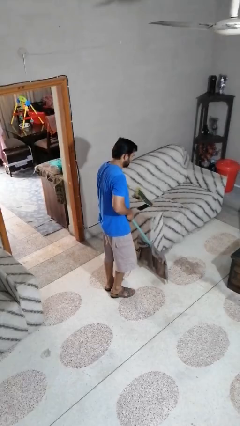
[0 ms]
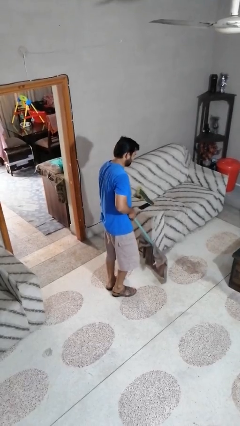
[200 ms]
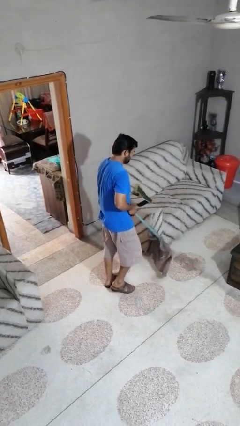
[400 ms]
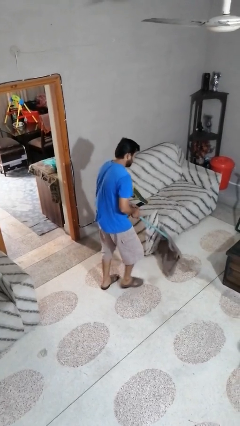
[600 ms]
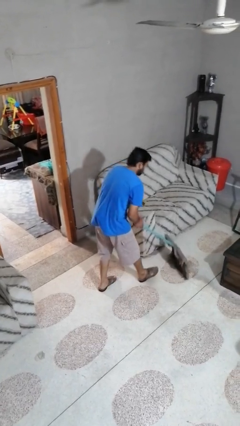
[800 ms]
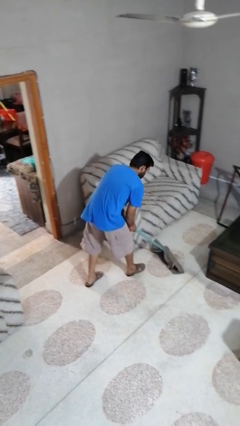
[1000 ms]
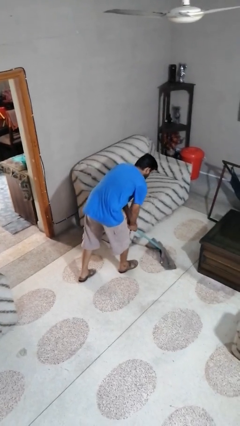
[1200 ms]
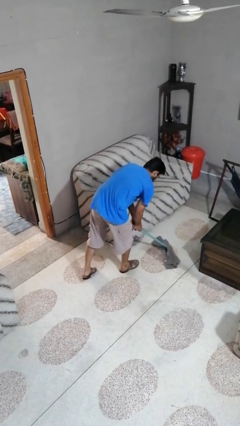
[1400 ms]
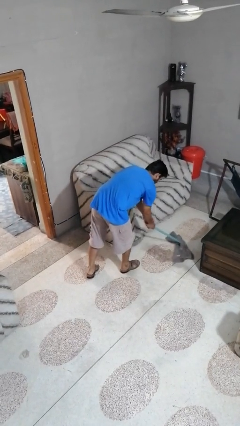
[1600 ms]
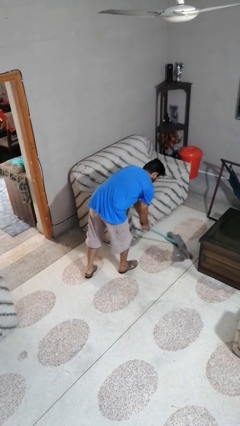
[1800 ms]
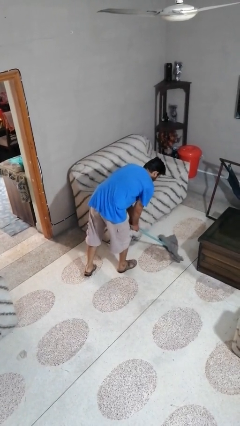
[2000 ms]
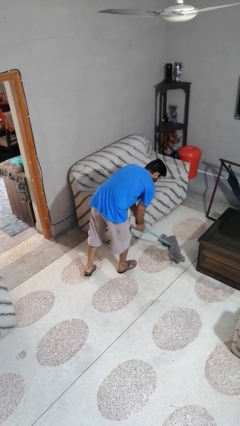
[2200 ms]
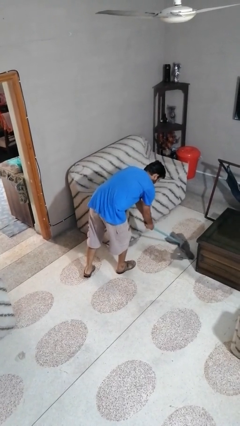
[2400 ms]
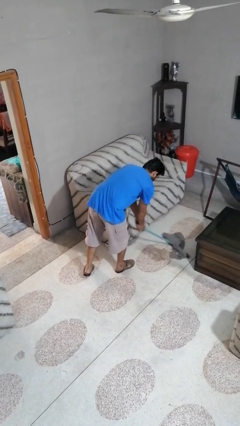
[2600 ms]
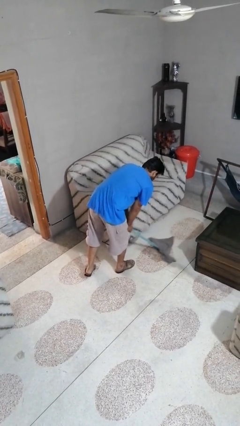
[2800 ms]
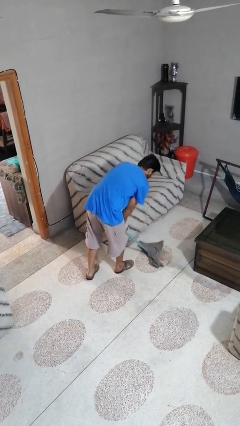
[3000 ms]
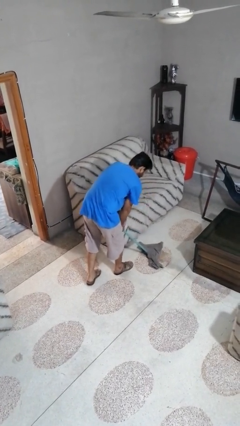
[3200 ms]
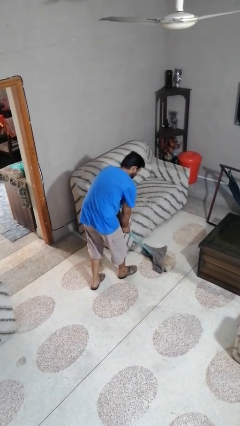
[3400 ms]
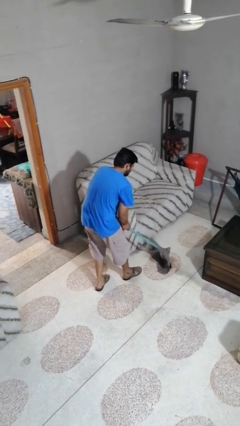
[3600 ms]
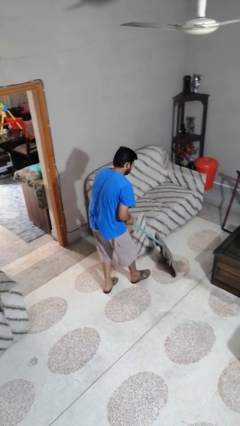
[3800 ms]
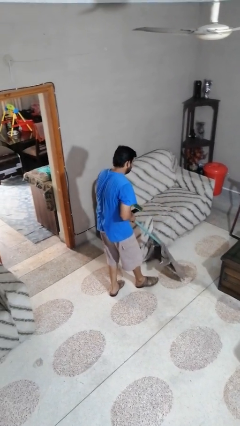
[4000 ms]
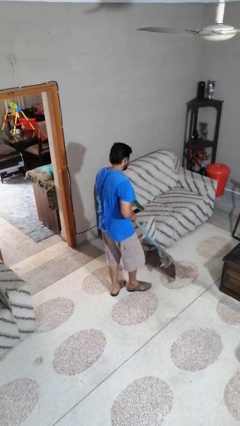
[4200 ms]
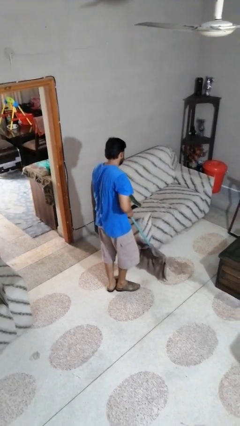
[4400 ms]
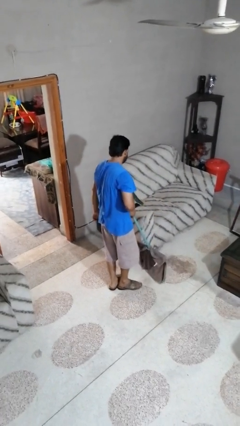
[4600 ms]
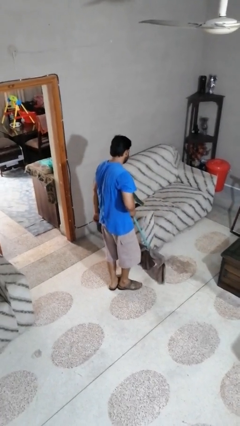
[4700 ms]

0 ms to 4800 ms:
person mops

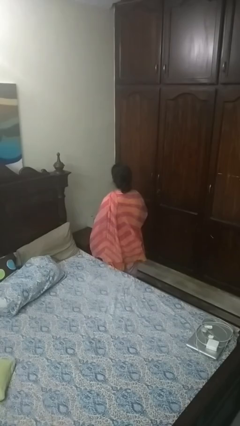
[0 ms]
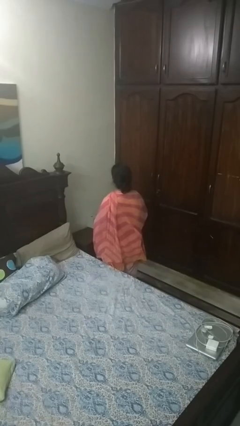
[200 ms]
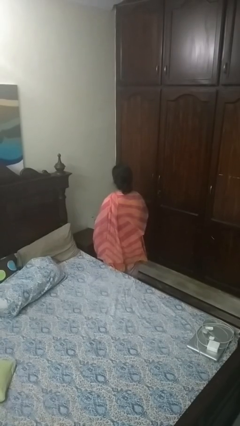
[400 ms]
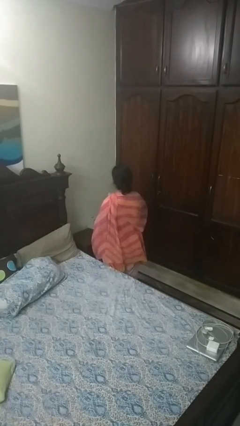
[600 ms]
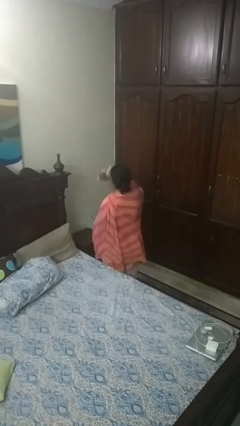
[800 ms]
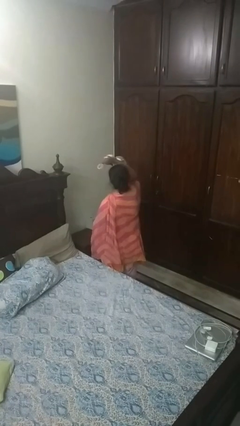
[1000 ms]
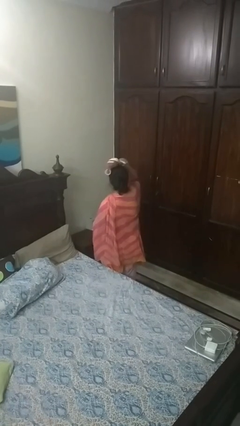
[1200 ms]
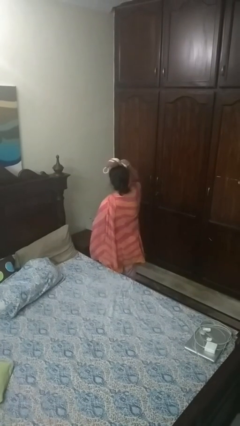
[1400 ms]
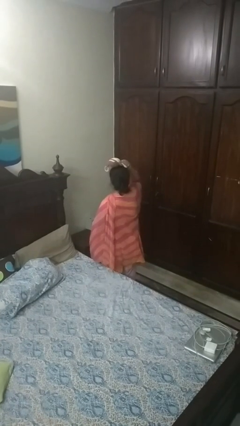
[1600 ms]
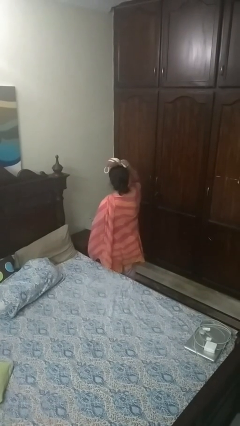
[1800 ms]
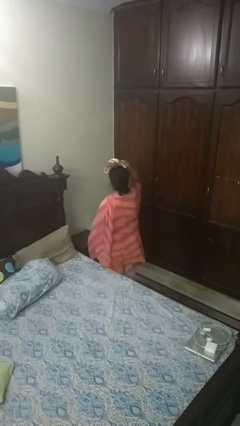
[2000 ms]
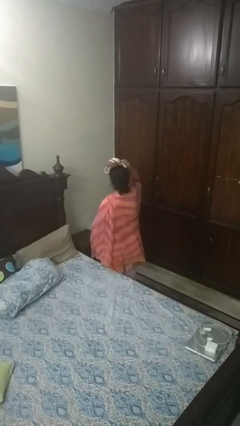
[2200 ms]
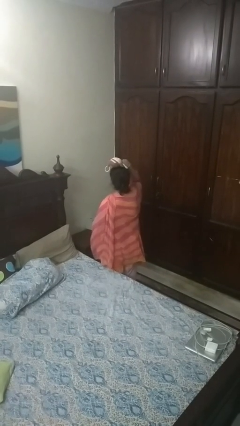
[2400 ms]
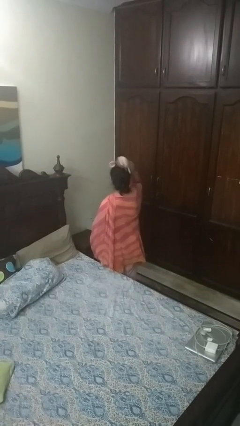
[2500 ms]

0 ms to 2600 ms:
person holds object above head

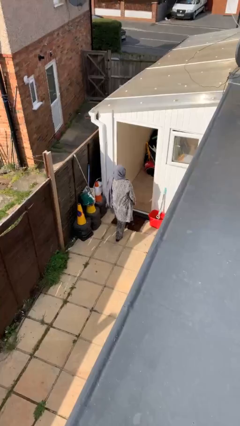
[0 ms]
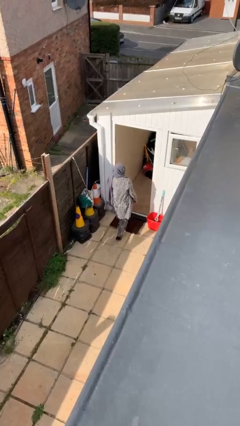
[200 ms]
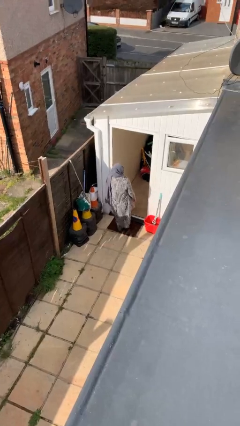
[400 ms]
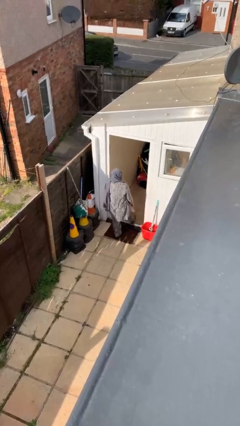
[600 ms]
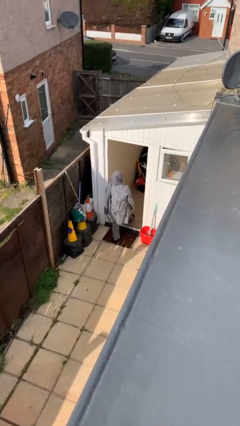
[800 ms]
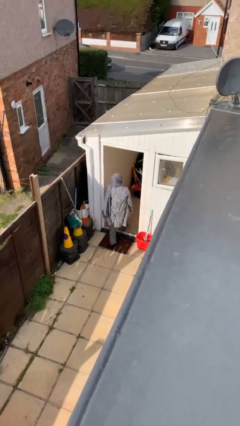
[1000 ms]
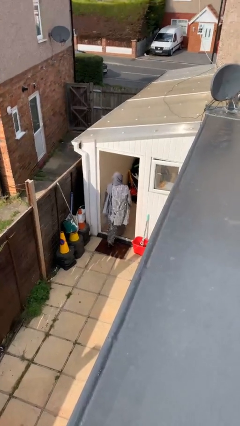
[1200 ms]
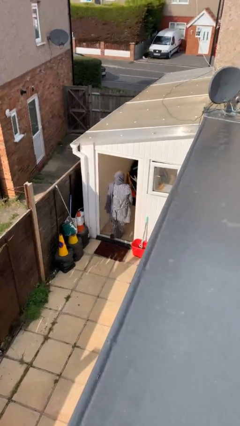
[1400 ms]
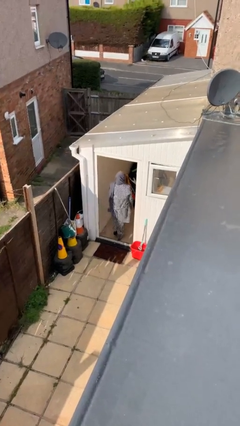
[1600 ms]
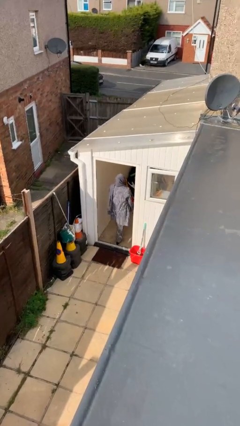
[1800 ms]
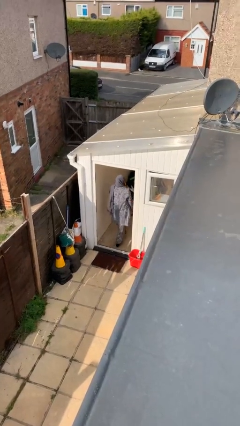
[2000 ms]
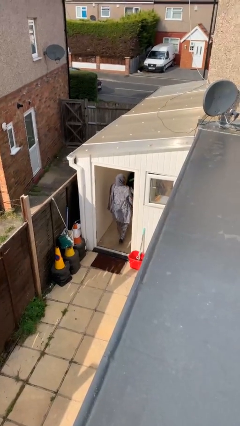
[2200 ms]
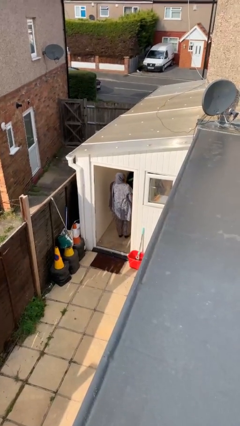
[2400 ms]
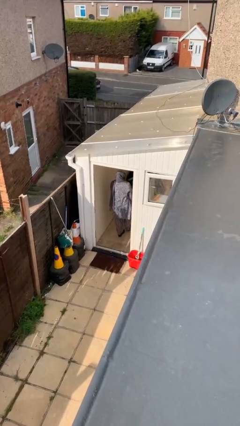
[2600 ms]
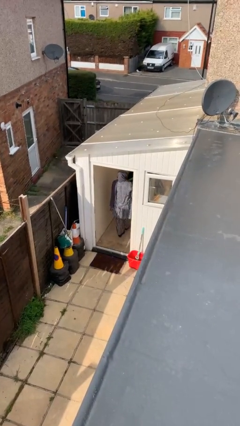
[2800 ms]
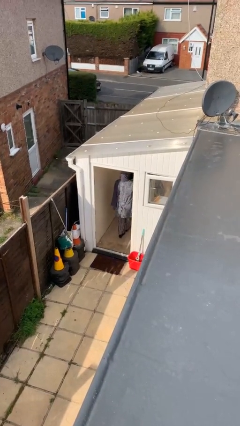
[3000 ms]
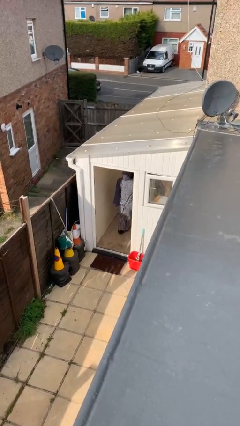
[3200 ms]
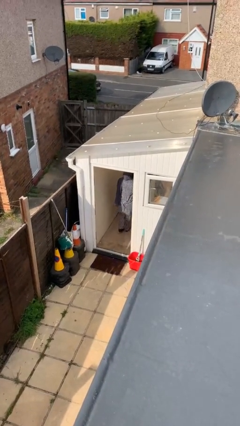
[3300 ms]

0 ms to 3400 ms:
person exits scene through structure

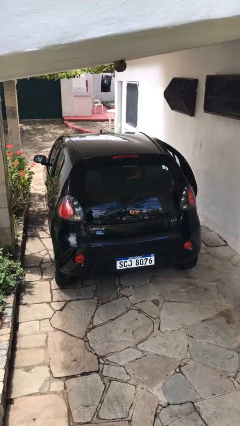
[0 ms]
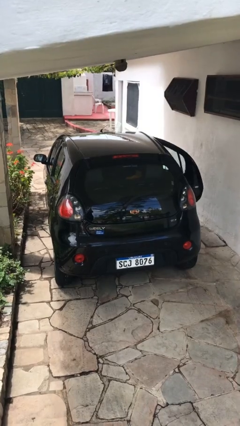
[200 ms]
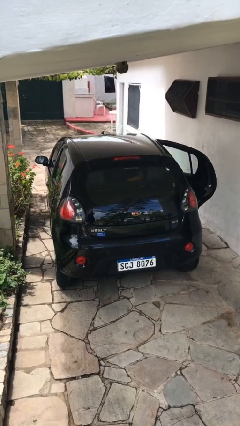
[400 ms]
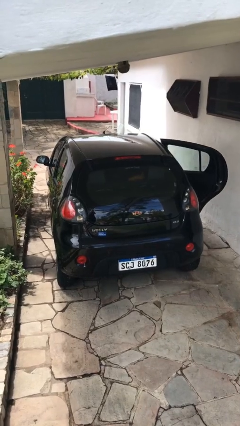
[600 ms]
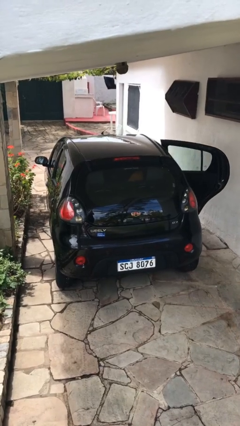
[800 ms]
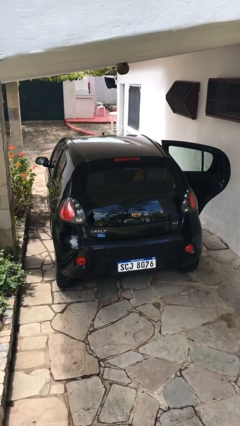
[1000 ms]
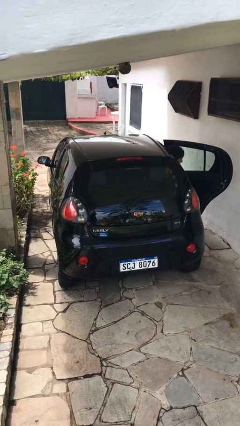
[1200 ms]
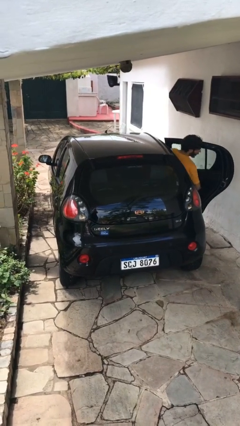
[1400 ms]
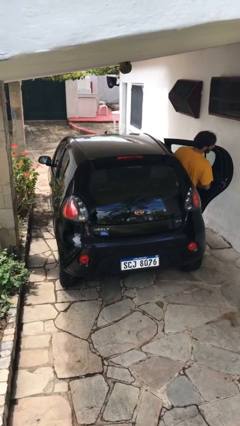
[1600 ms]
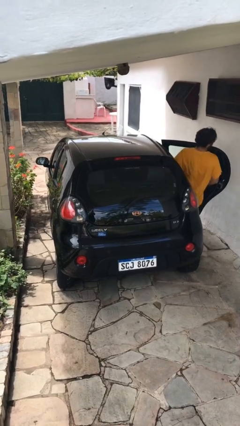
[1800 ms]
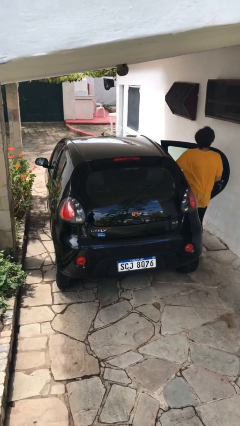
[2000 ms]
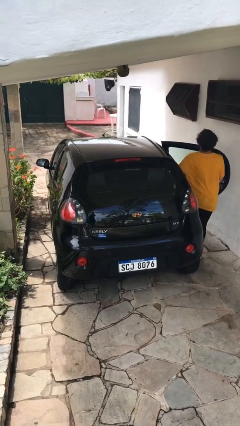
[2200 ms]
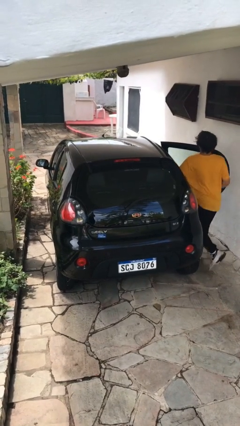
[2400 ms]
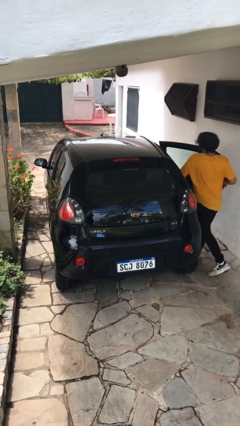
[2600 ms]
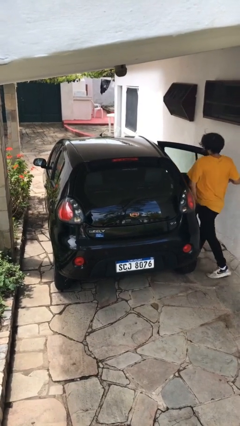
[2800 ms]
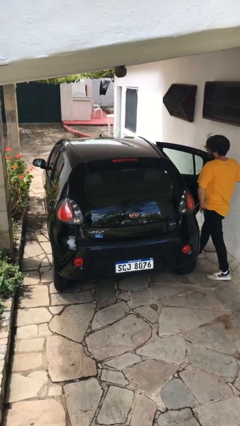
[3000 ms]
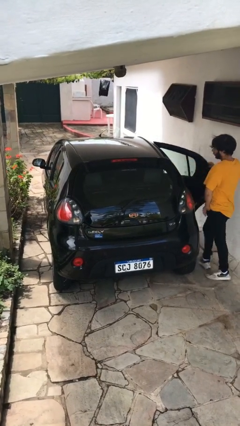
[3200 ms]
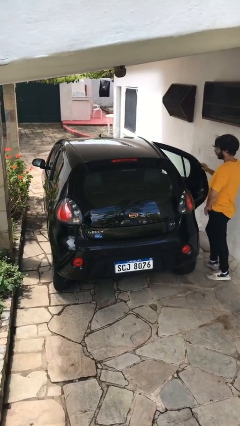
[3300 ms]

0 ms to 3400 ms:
car drops off person

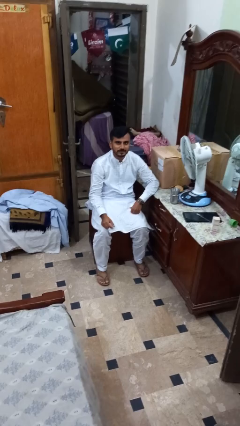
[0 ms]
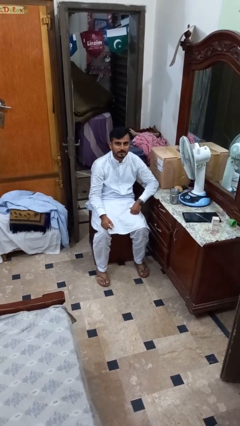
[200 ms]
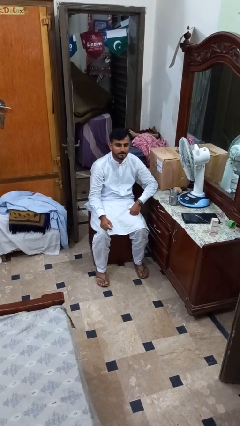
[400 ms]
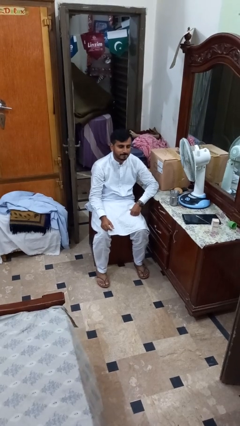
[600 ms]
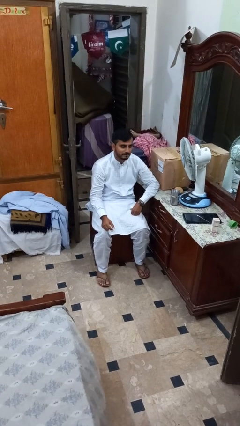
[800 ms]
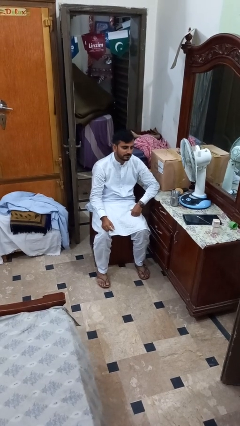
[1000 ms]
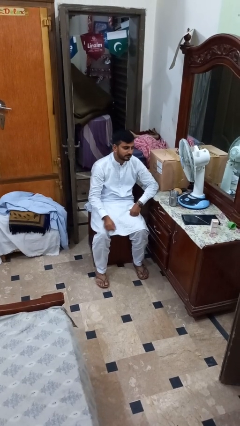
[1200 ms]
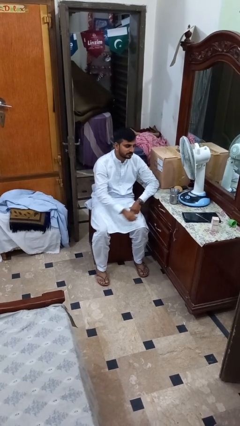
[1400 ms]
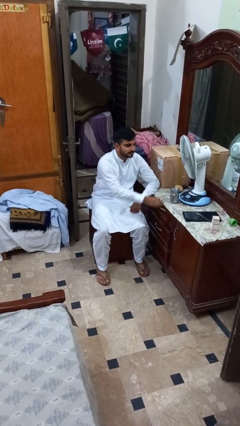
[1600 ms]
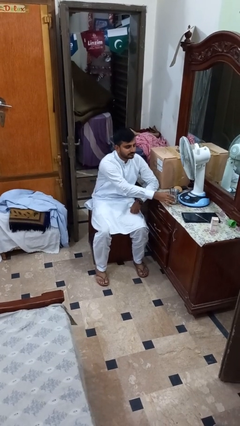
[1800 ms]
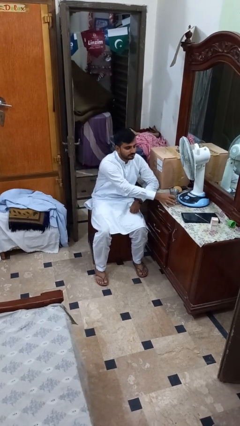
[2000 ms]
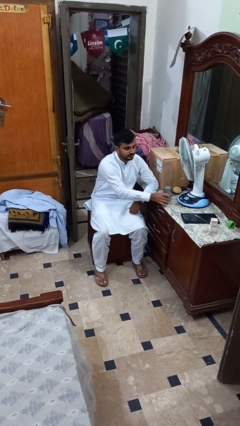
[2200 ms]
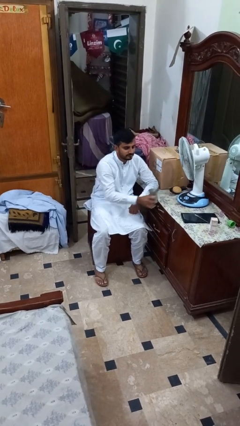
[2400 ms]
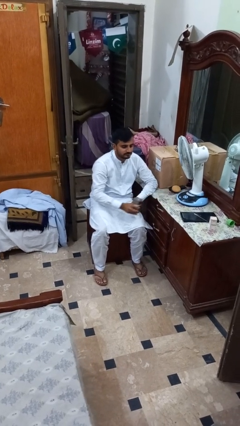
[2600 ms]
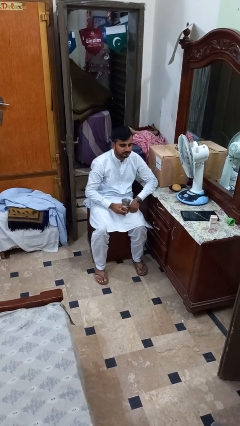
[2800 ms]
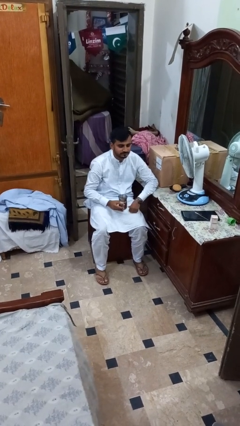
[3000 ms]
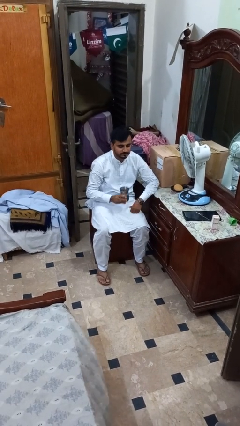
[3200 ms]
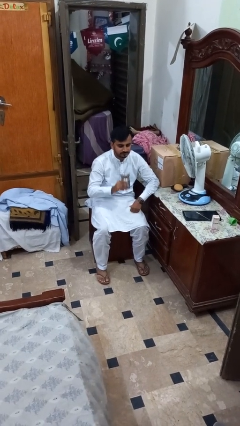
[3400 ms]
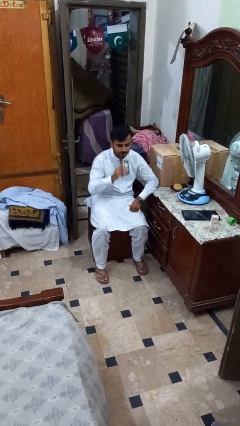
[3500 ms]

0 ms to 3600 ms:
person picks up object from table
